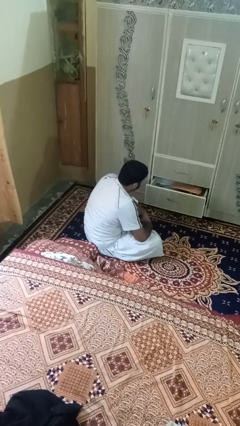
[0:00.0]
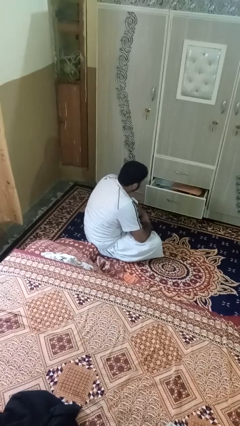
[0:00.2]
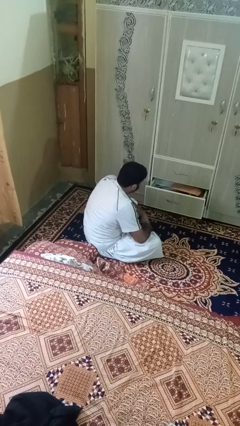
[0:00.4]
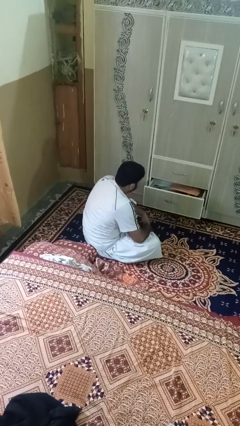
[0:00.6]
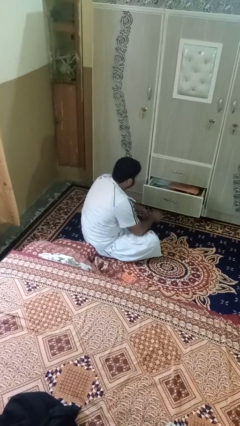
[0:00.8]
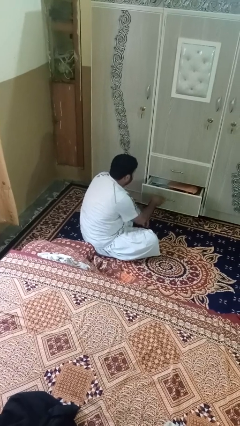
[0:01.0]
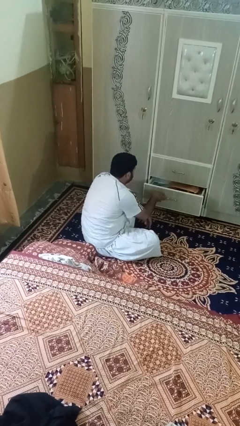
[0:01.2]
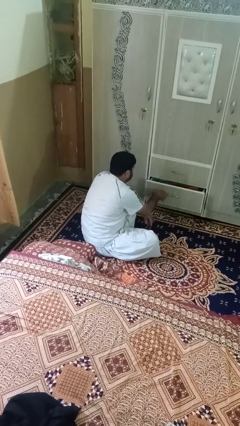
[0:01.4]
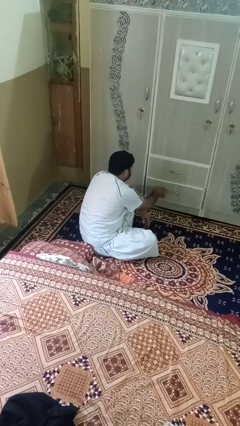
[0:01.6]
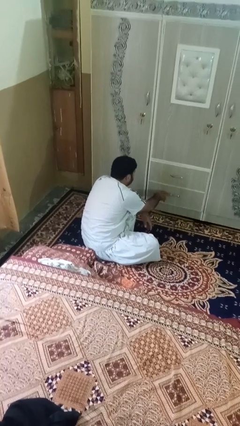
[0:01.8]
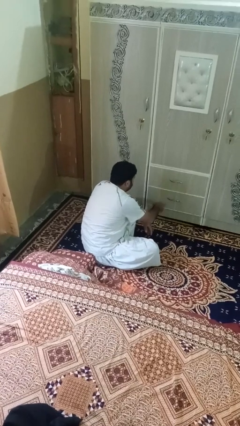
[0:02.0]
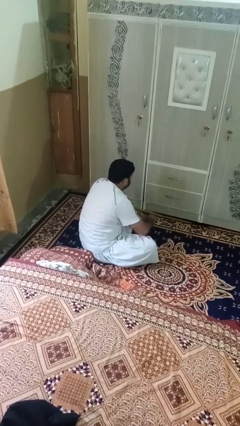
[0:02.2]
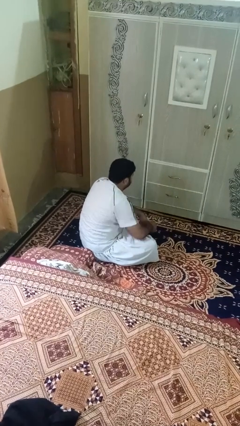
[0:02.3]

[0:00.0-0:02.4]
person closes dresser drawer

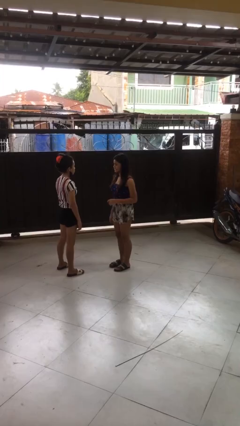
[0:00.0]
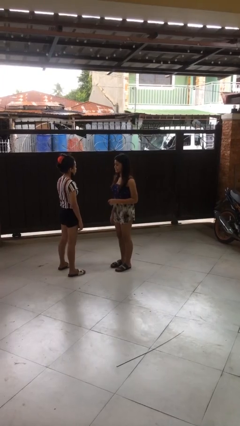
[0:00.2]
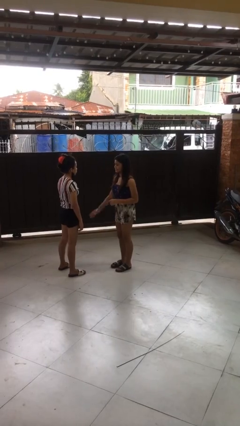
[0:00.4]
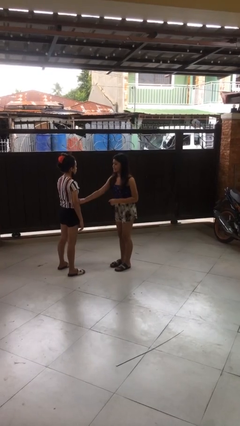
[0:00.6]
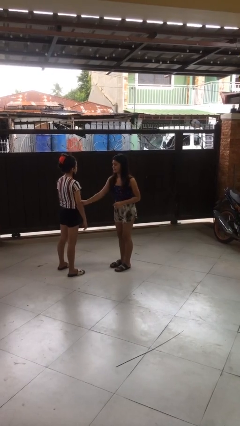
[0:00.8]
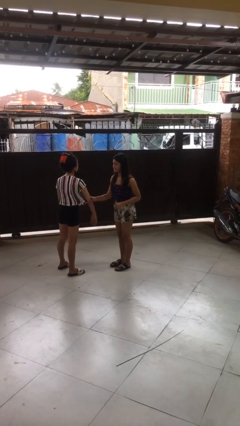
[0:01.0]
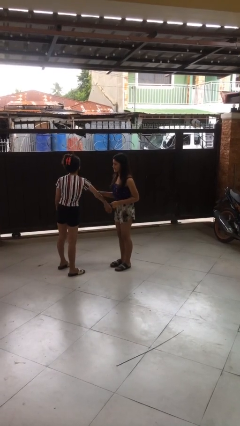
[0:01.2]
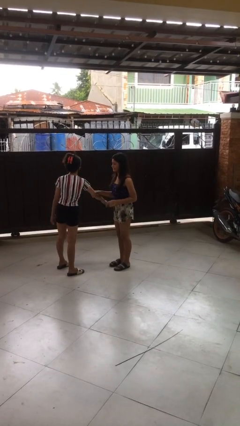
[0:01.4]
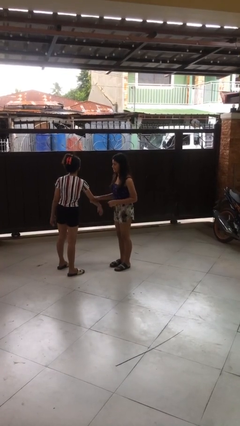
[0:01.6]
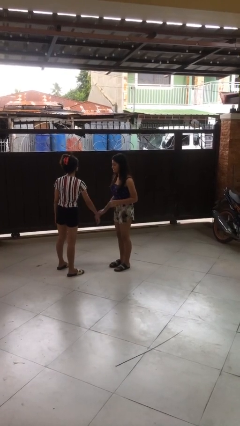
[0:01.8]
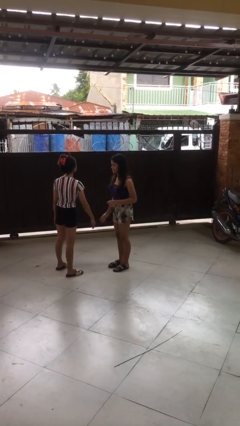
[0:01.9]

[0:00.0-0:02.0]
person grabs person by forearm

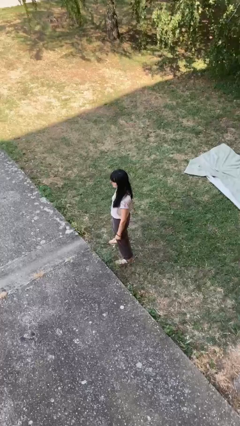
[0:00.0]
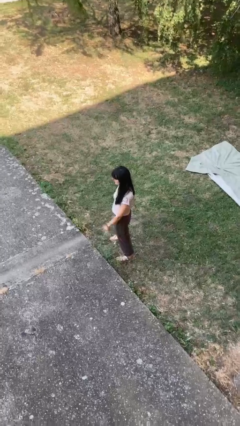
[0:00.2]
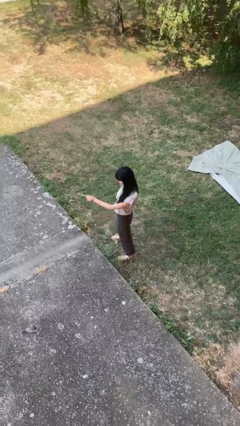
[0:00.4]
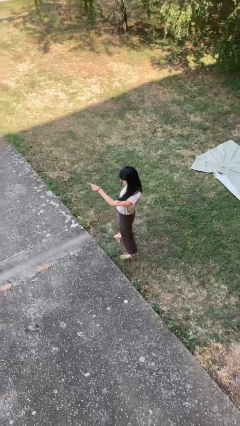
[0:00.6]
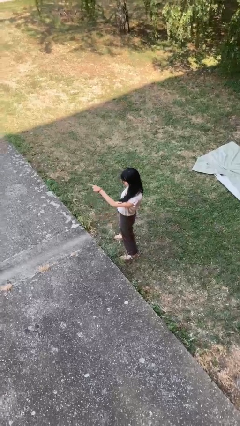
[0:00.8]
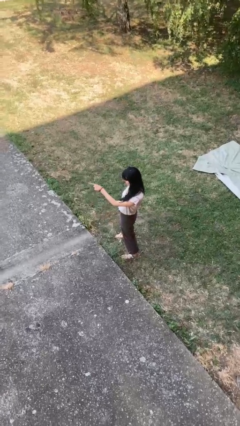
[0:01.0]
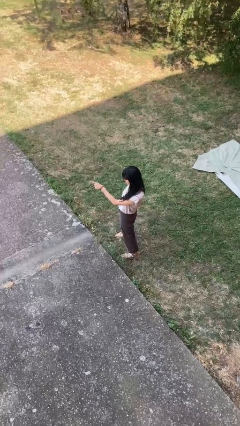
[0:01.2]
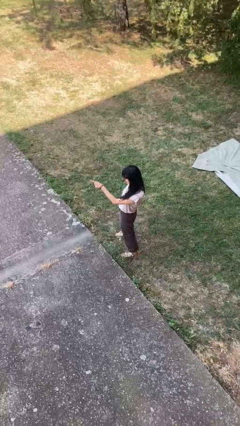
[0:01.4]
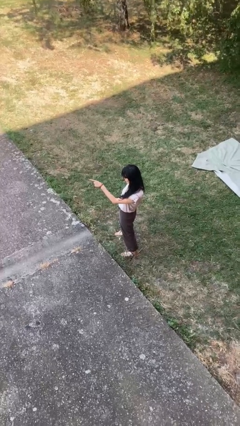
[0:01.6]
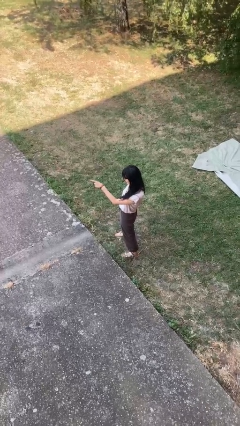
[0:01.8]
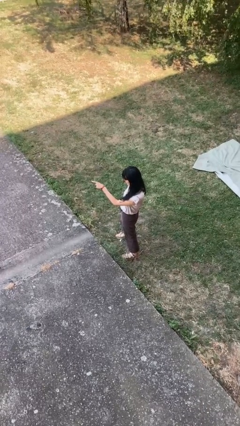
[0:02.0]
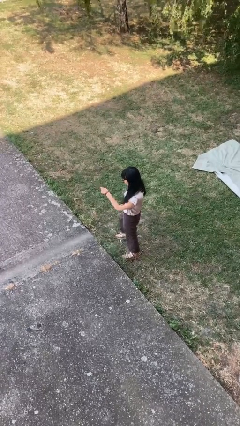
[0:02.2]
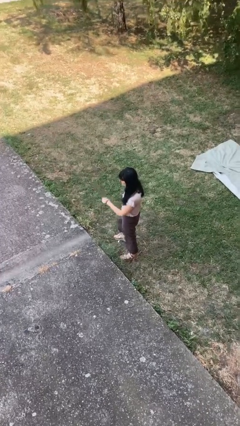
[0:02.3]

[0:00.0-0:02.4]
person points at person

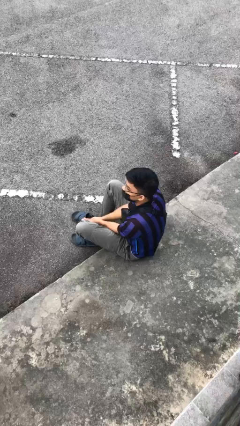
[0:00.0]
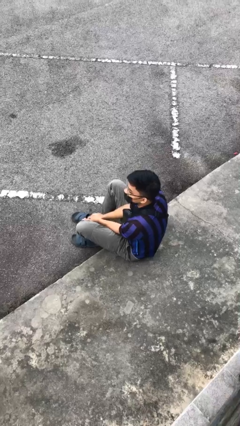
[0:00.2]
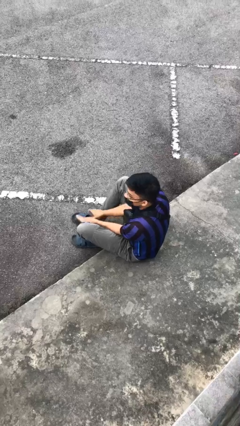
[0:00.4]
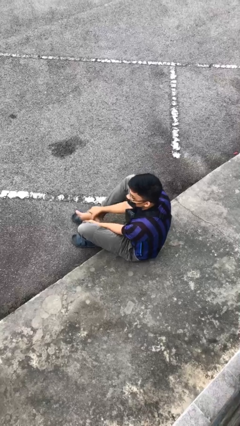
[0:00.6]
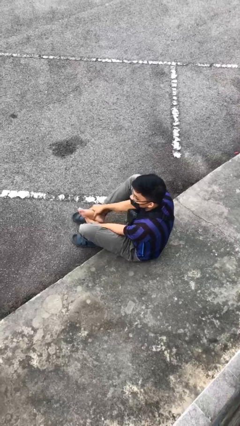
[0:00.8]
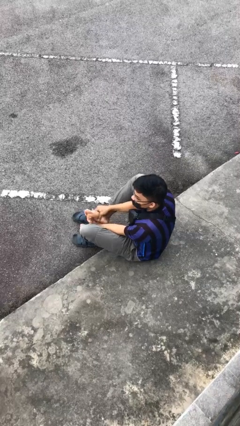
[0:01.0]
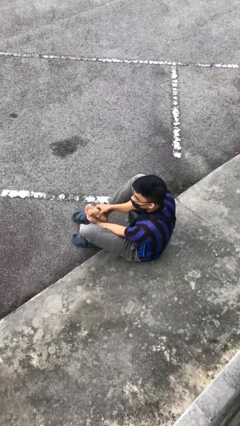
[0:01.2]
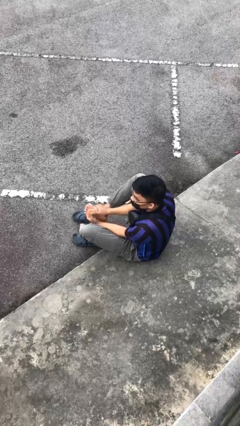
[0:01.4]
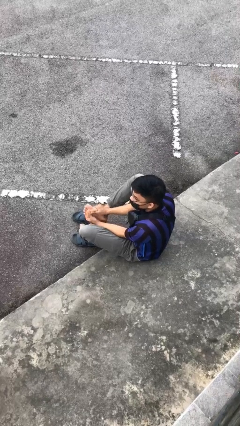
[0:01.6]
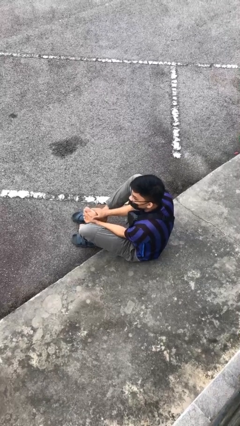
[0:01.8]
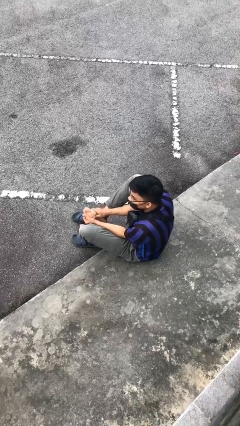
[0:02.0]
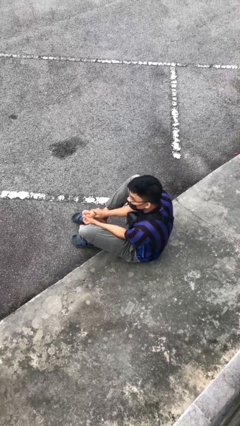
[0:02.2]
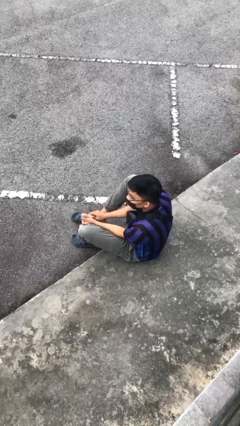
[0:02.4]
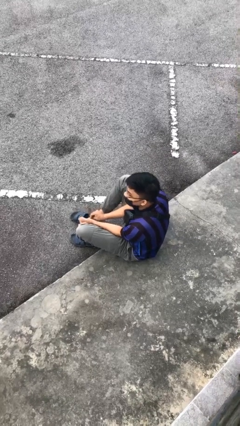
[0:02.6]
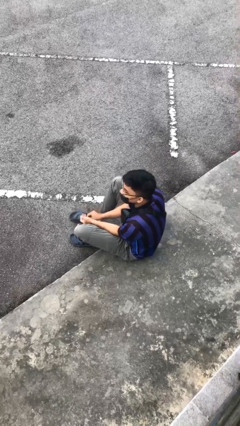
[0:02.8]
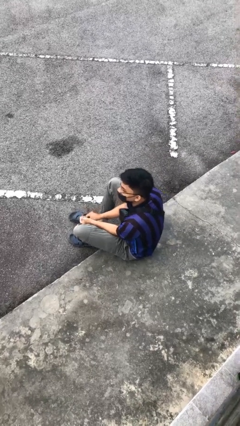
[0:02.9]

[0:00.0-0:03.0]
person rubs foot

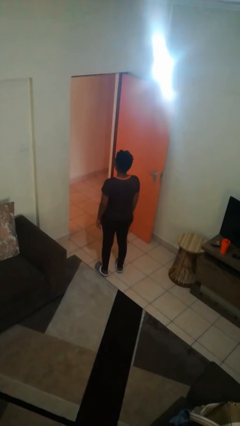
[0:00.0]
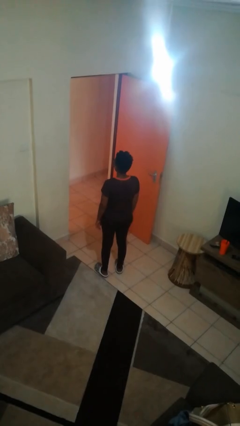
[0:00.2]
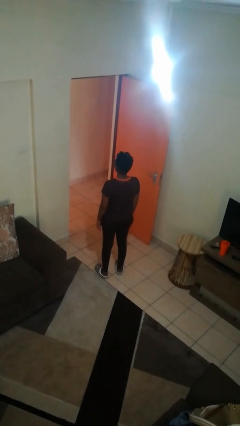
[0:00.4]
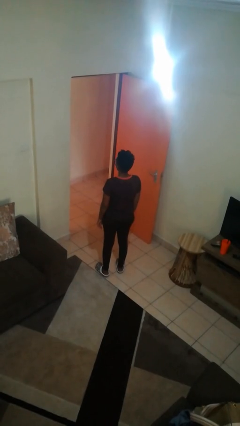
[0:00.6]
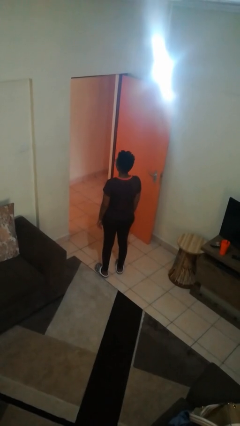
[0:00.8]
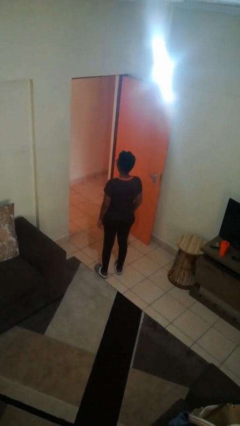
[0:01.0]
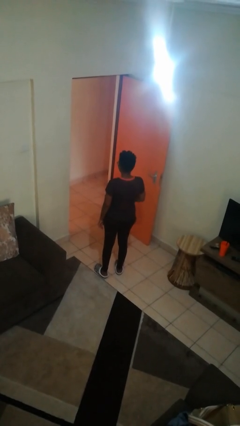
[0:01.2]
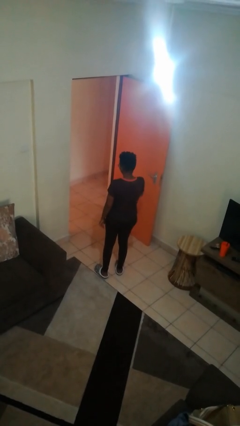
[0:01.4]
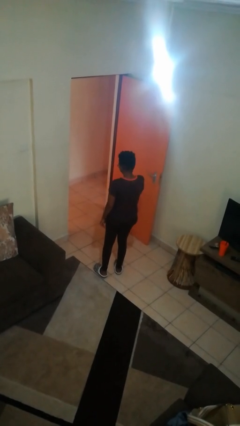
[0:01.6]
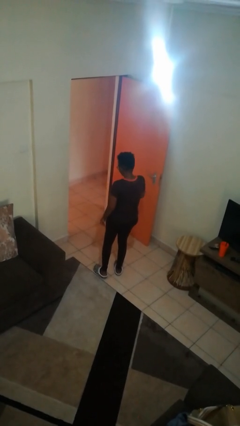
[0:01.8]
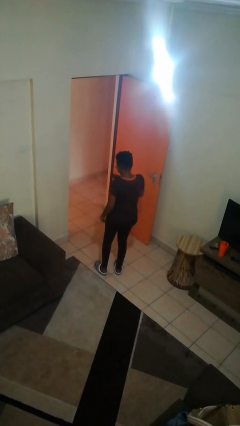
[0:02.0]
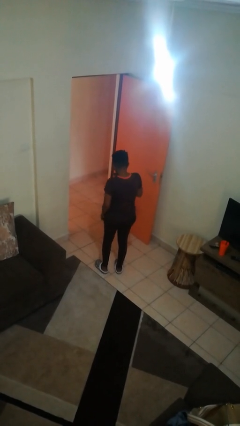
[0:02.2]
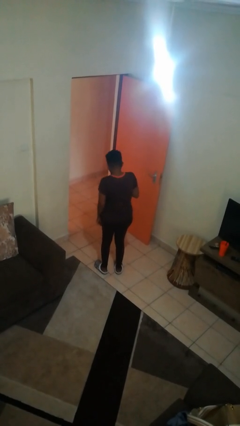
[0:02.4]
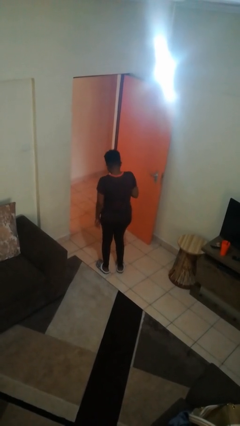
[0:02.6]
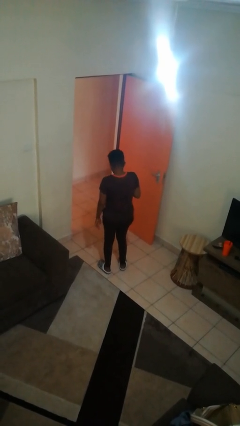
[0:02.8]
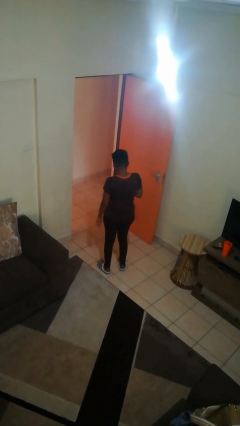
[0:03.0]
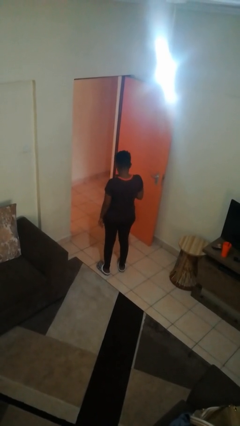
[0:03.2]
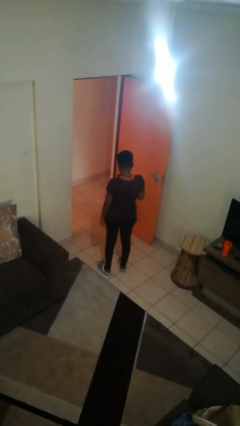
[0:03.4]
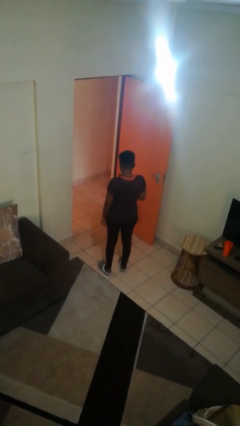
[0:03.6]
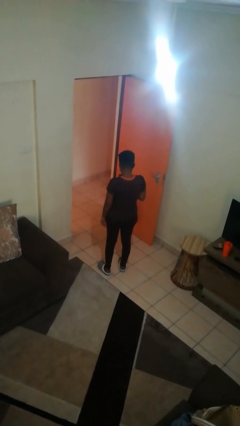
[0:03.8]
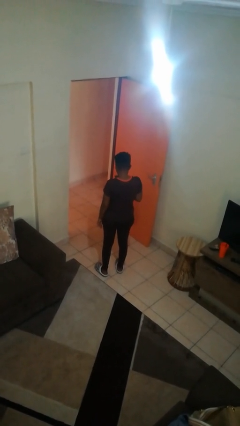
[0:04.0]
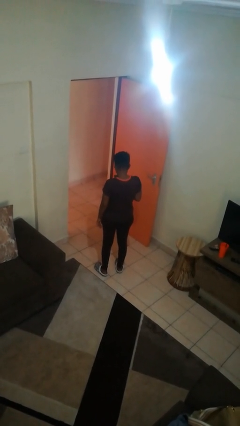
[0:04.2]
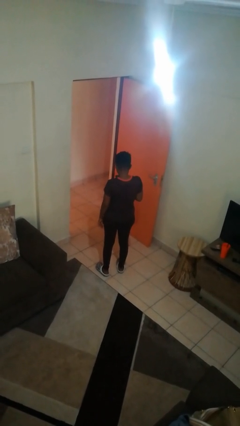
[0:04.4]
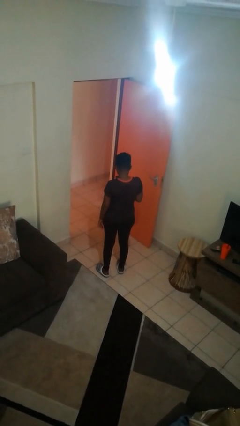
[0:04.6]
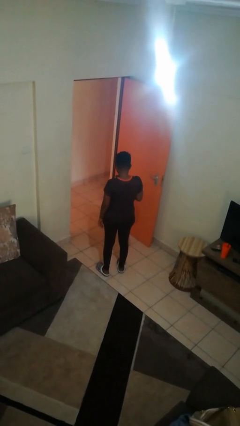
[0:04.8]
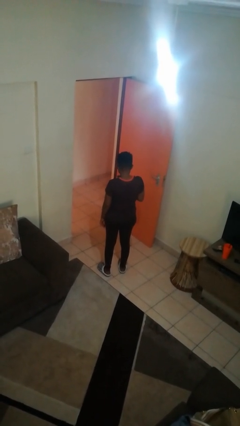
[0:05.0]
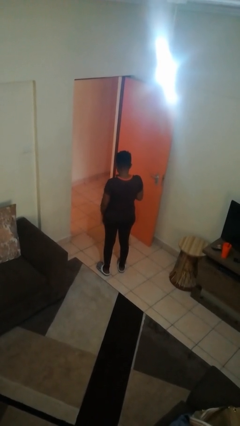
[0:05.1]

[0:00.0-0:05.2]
person takes phone from pocket

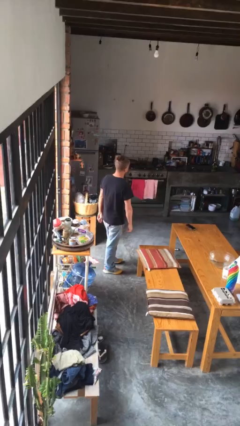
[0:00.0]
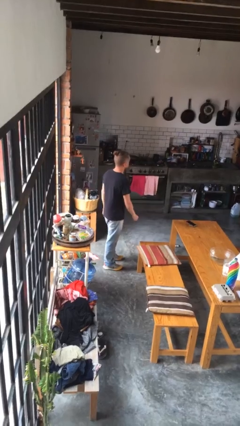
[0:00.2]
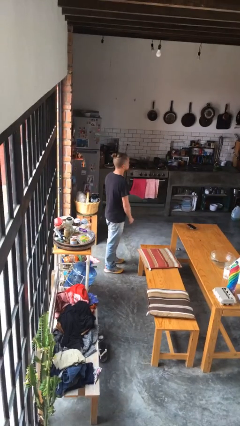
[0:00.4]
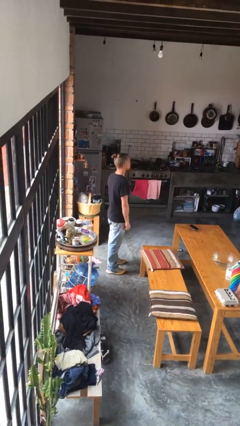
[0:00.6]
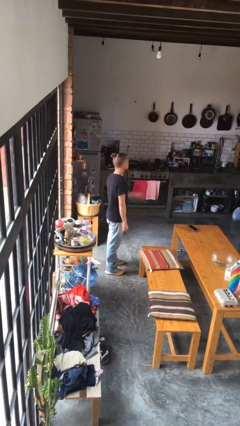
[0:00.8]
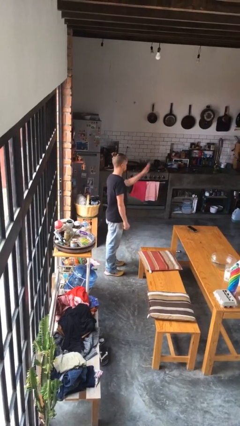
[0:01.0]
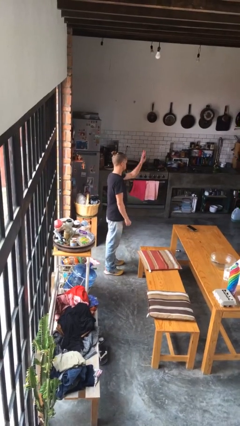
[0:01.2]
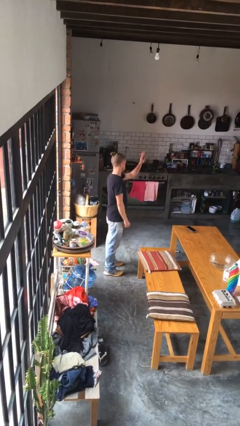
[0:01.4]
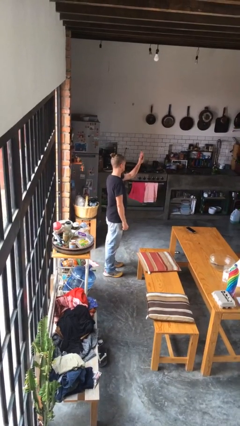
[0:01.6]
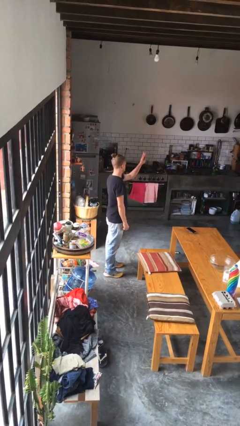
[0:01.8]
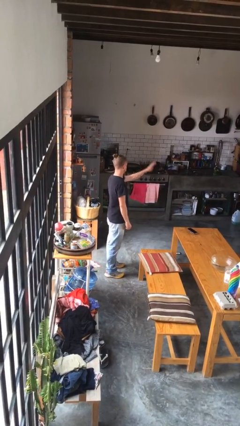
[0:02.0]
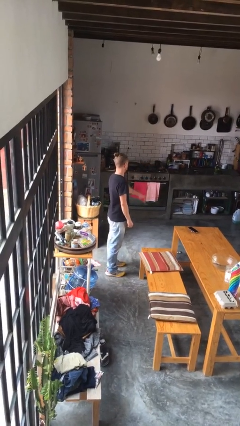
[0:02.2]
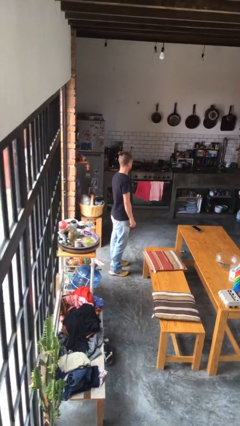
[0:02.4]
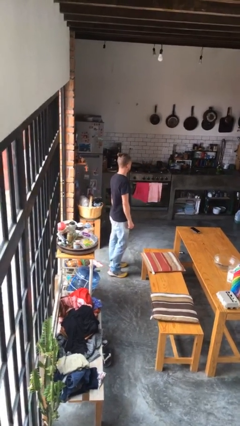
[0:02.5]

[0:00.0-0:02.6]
person gestures number three
